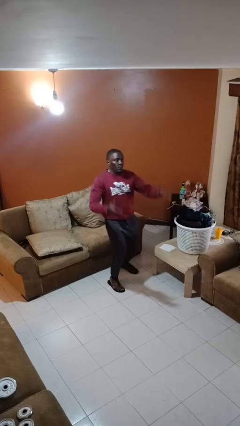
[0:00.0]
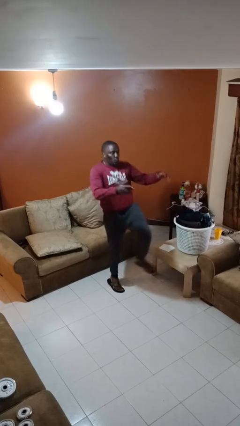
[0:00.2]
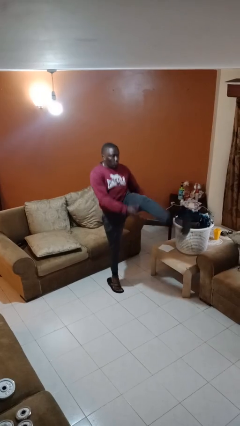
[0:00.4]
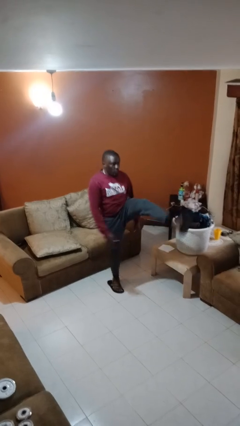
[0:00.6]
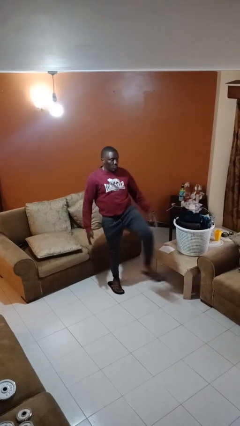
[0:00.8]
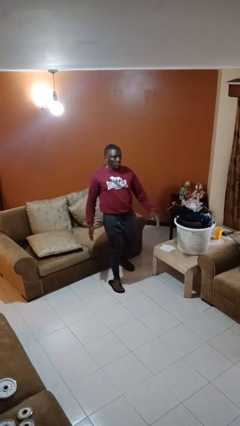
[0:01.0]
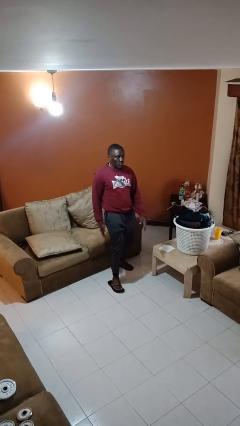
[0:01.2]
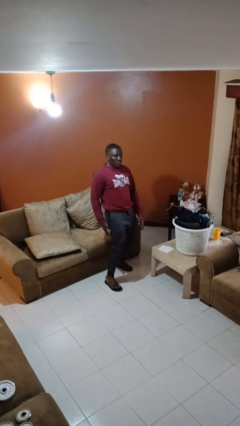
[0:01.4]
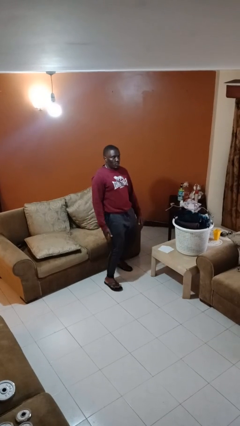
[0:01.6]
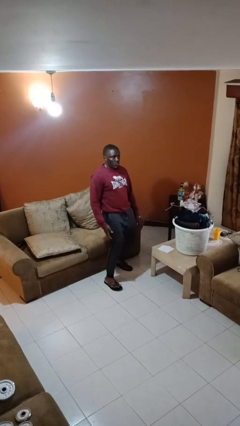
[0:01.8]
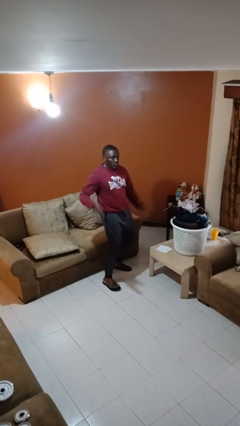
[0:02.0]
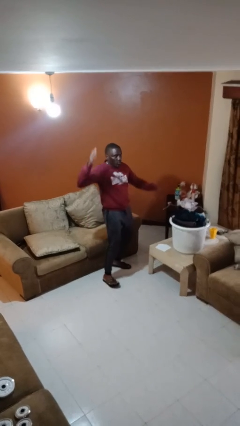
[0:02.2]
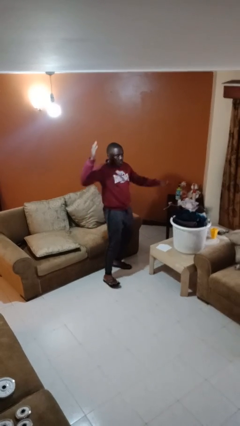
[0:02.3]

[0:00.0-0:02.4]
person karate kicks

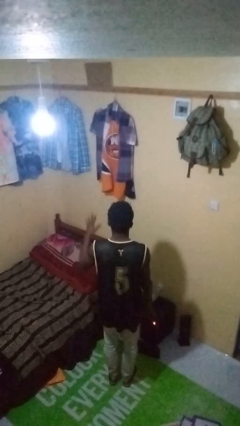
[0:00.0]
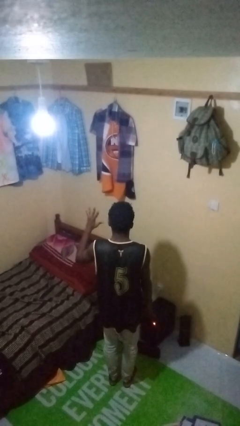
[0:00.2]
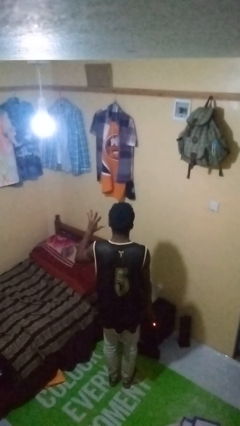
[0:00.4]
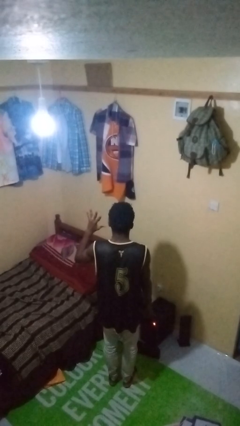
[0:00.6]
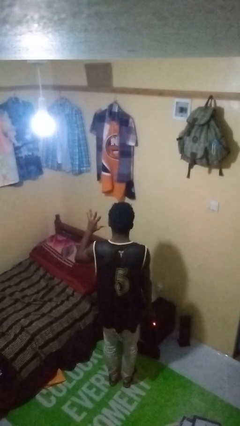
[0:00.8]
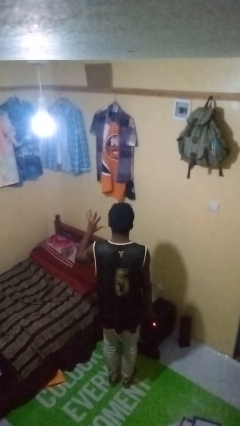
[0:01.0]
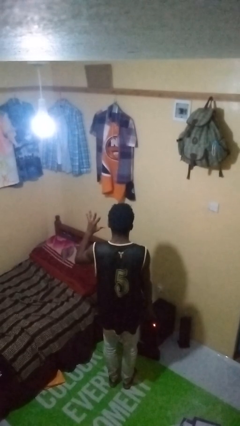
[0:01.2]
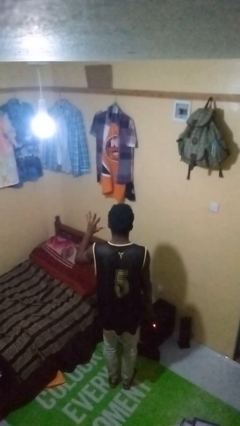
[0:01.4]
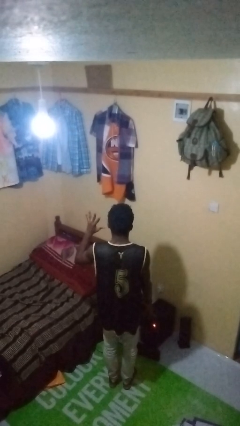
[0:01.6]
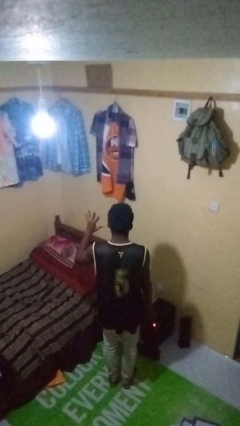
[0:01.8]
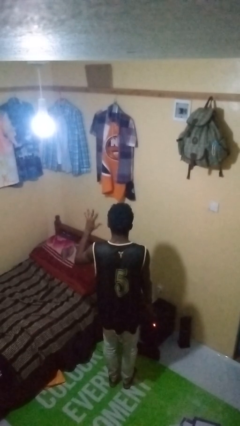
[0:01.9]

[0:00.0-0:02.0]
person gestures number five

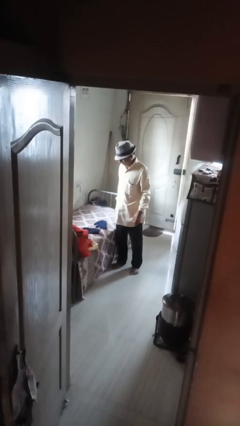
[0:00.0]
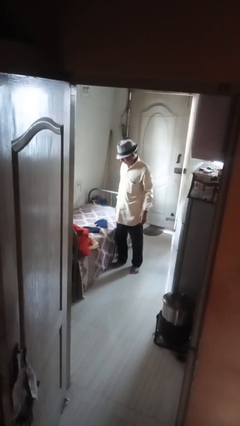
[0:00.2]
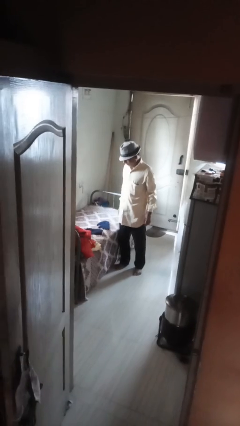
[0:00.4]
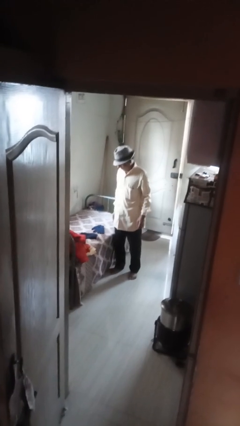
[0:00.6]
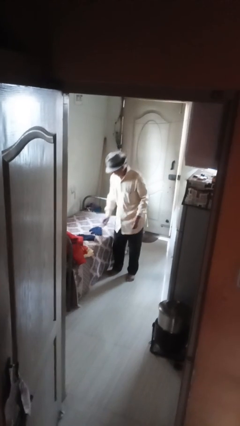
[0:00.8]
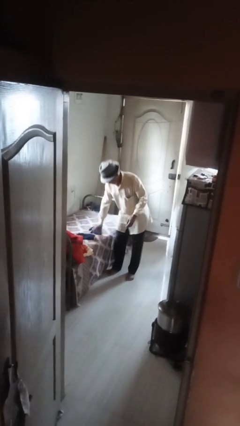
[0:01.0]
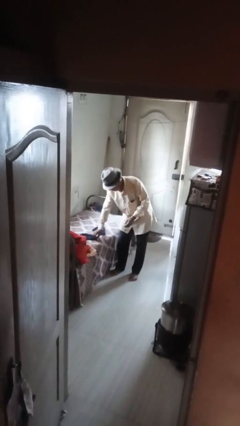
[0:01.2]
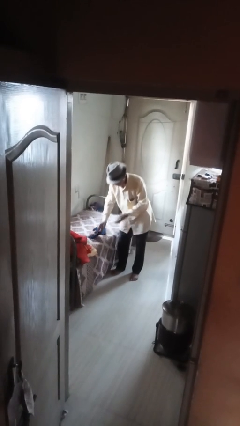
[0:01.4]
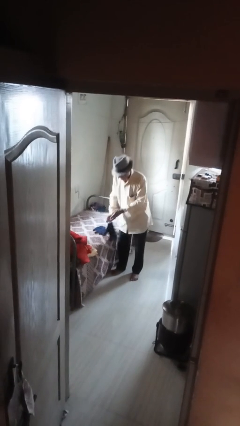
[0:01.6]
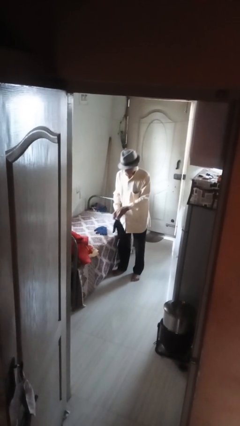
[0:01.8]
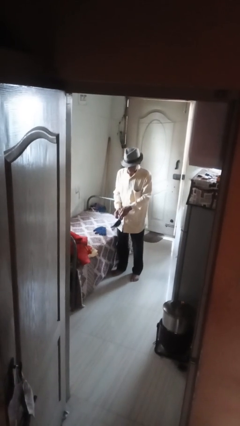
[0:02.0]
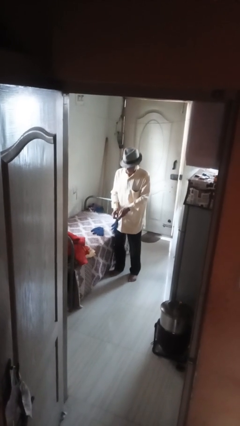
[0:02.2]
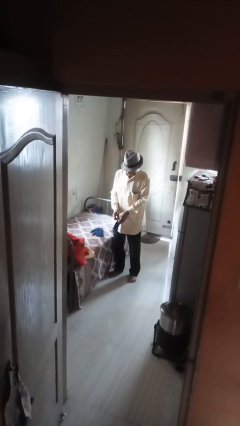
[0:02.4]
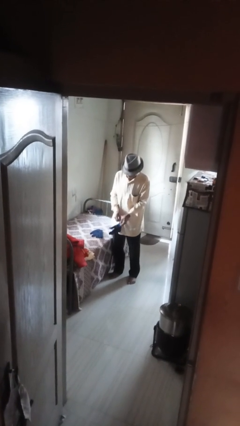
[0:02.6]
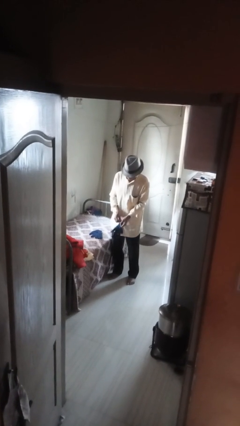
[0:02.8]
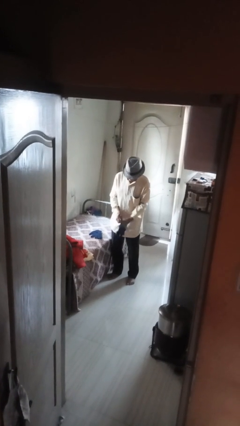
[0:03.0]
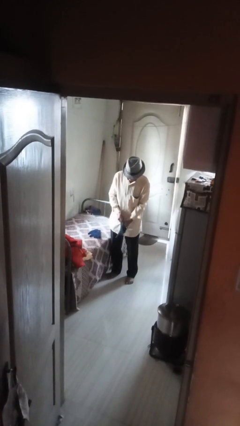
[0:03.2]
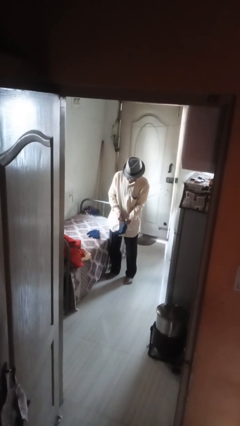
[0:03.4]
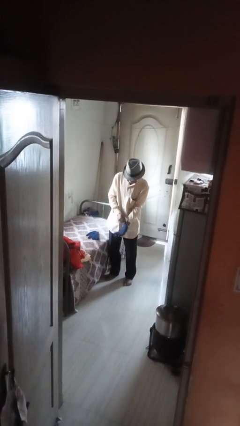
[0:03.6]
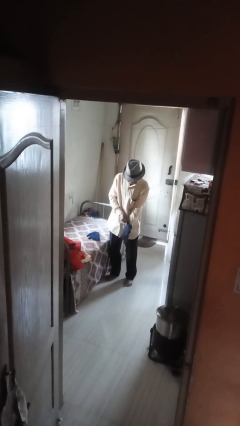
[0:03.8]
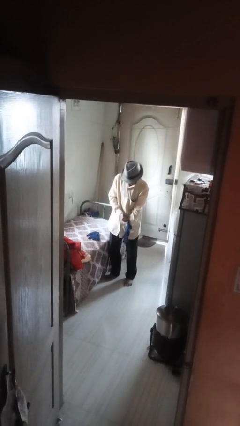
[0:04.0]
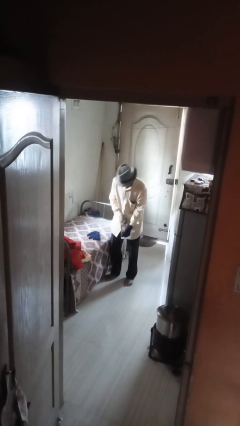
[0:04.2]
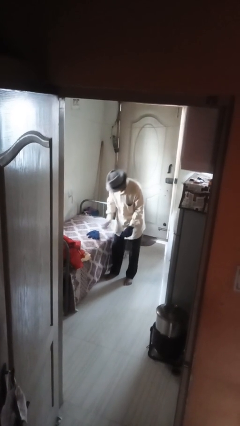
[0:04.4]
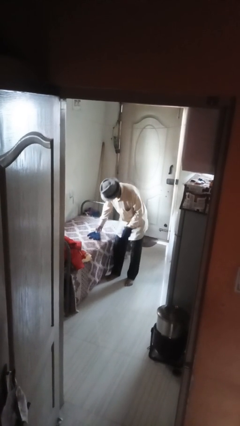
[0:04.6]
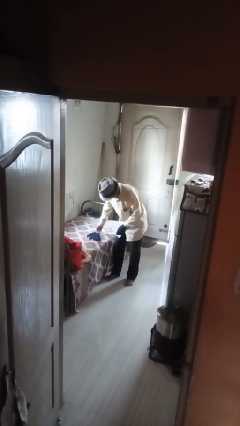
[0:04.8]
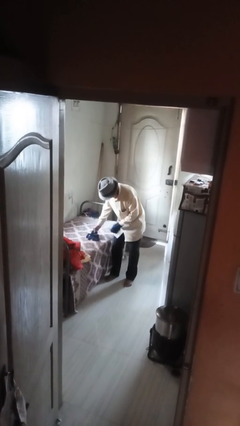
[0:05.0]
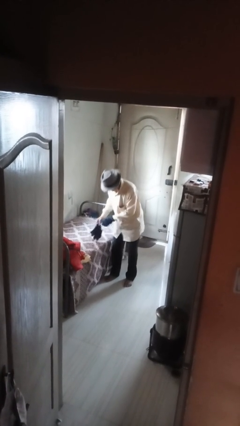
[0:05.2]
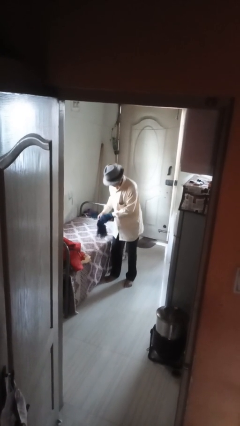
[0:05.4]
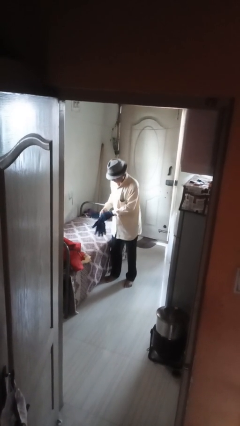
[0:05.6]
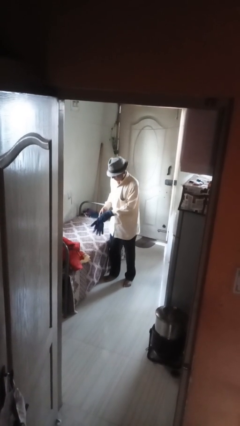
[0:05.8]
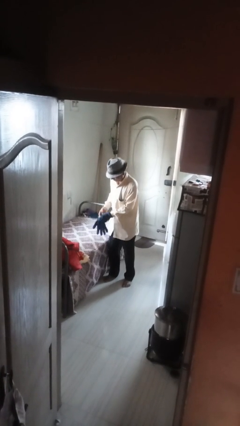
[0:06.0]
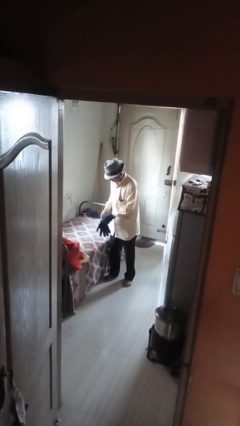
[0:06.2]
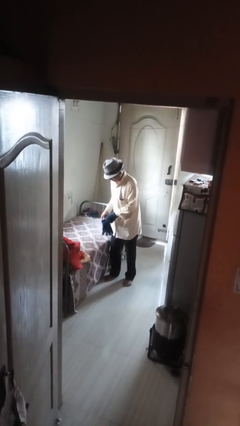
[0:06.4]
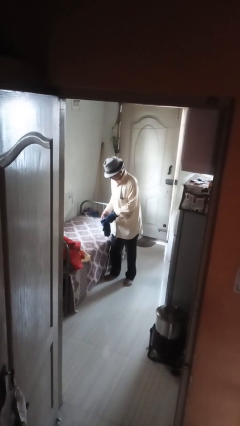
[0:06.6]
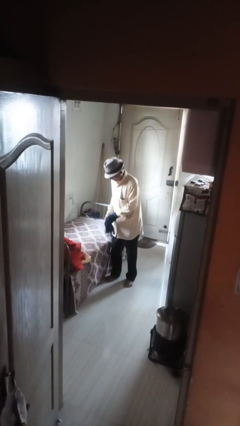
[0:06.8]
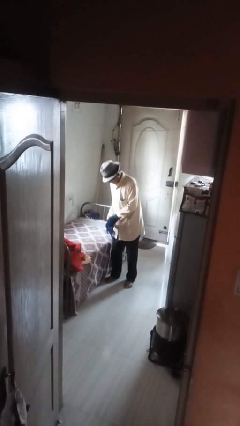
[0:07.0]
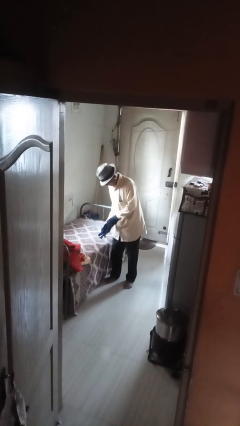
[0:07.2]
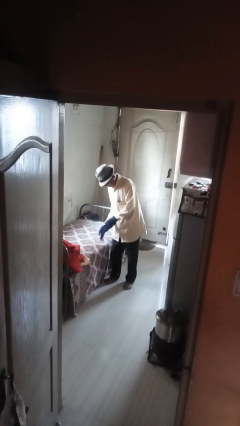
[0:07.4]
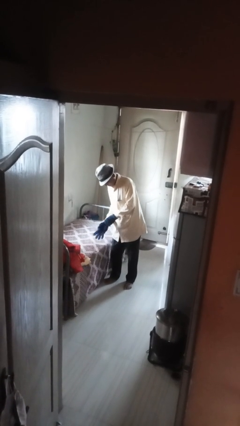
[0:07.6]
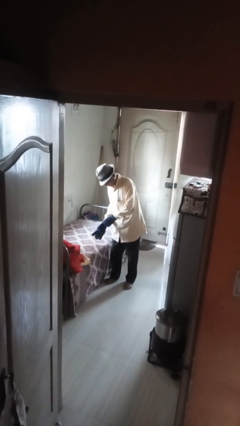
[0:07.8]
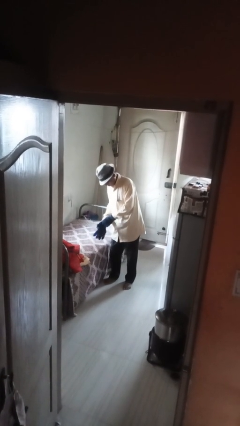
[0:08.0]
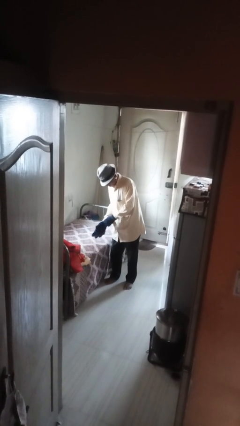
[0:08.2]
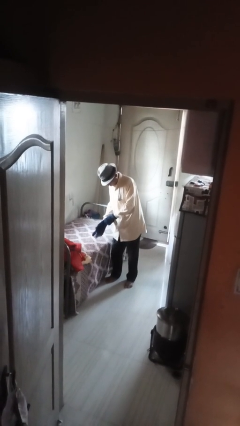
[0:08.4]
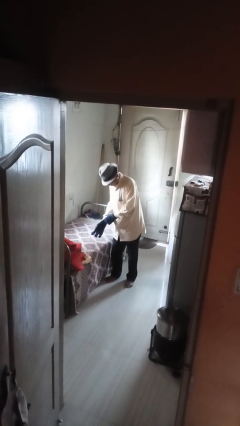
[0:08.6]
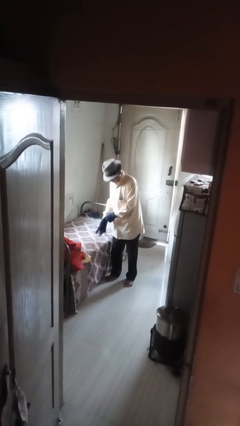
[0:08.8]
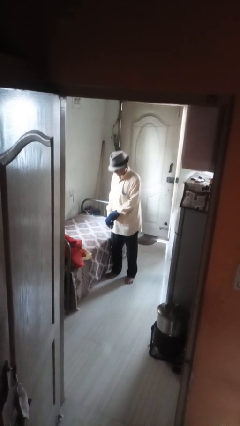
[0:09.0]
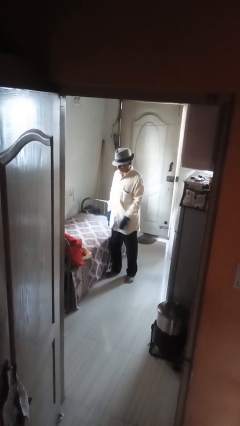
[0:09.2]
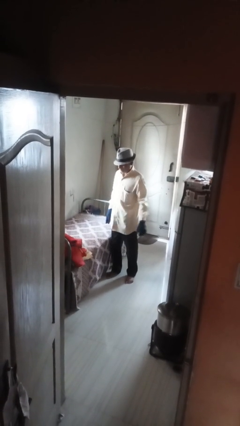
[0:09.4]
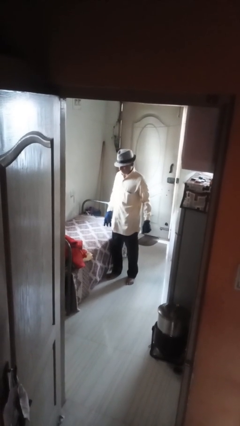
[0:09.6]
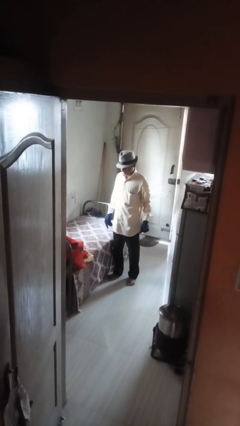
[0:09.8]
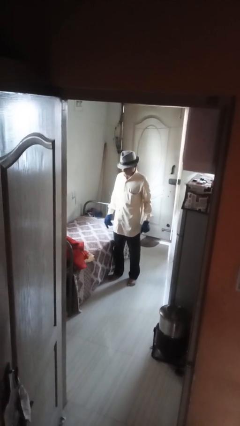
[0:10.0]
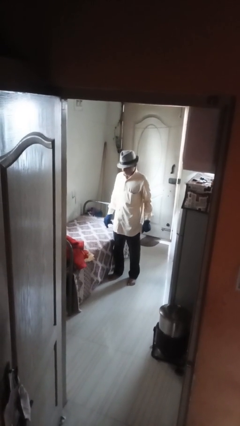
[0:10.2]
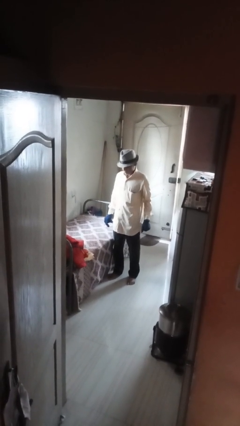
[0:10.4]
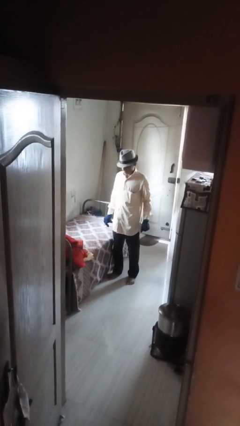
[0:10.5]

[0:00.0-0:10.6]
person puts on gloves

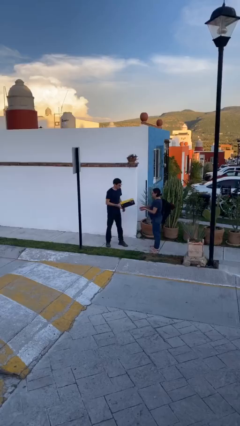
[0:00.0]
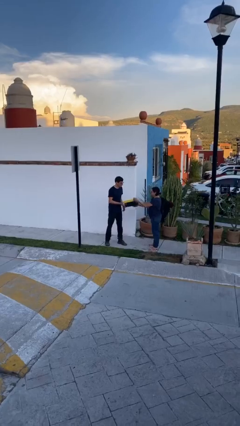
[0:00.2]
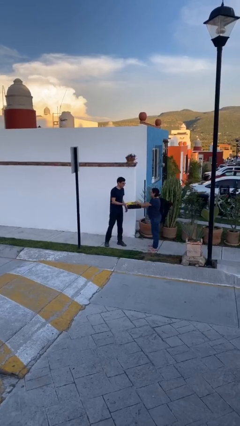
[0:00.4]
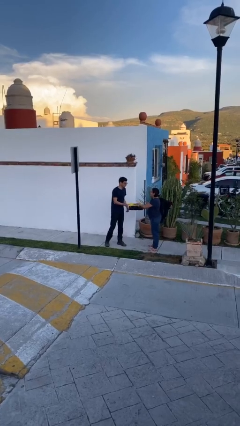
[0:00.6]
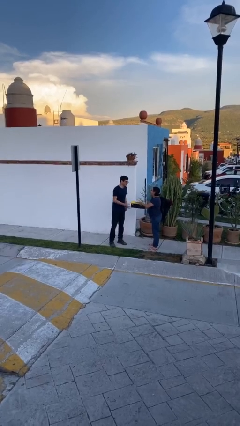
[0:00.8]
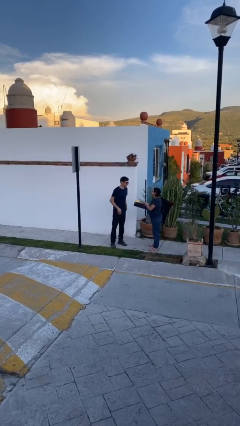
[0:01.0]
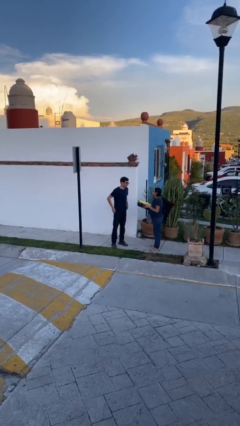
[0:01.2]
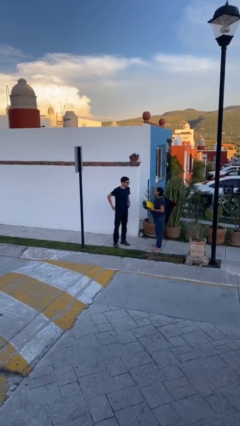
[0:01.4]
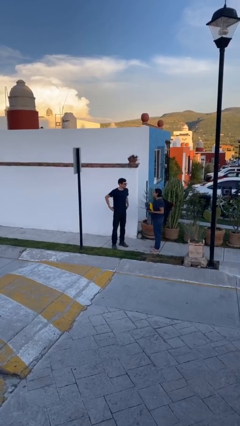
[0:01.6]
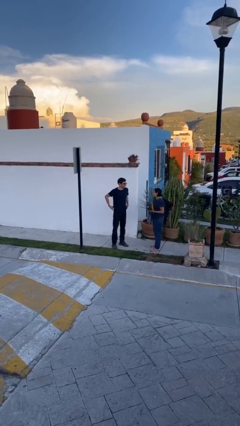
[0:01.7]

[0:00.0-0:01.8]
person transfers object to person

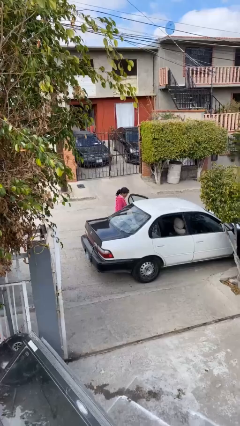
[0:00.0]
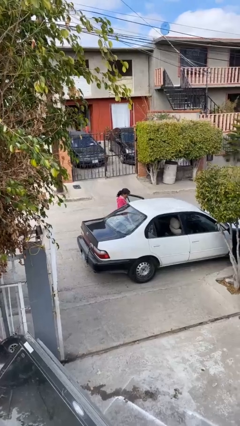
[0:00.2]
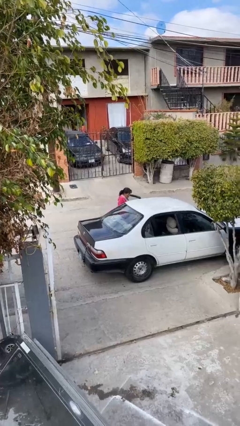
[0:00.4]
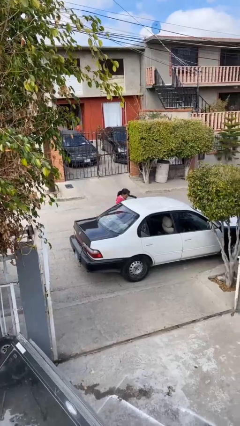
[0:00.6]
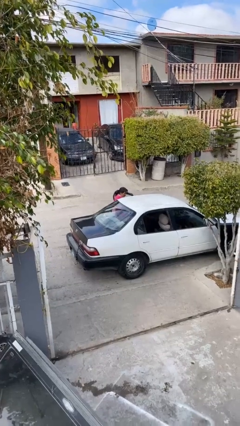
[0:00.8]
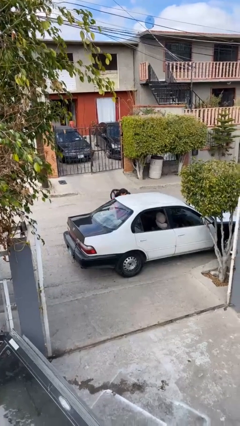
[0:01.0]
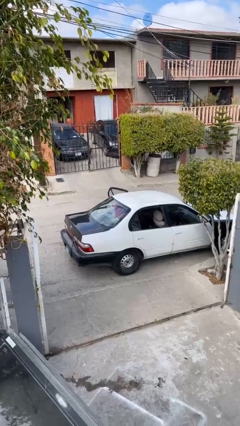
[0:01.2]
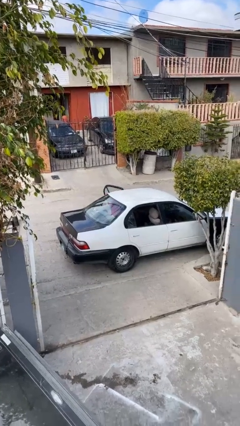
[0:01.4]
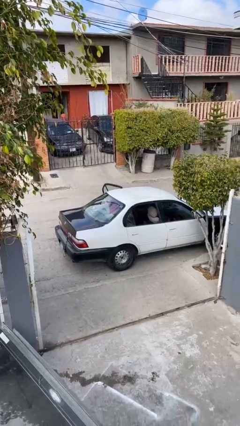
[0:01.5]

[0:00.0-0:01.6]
person enters car
